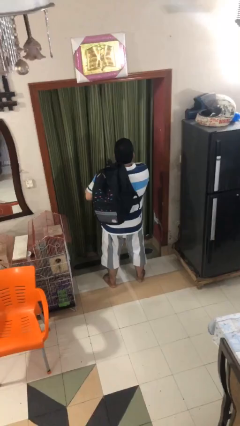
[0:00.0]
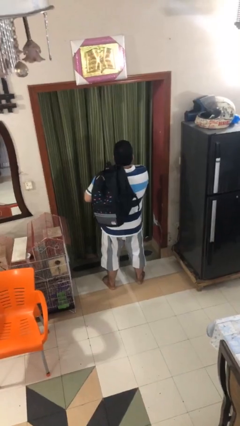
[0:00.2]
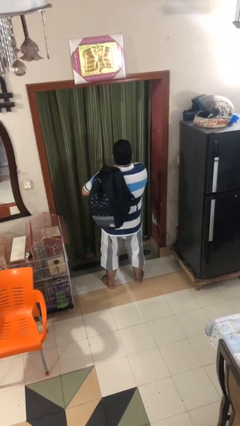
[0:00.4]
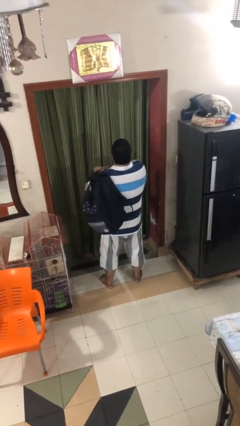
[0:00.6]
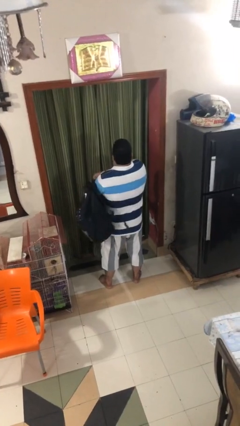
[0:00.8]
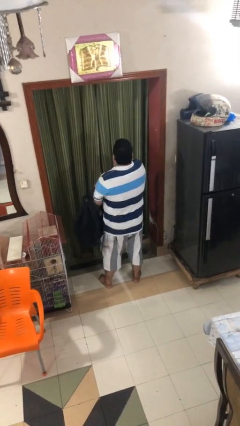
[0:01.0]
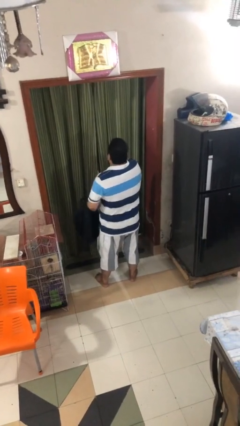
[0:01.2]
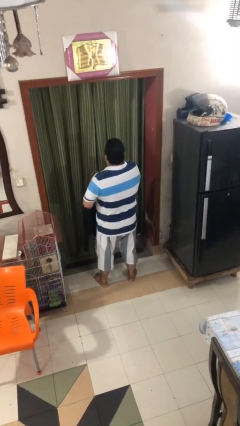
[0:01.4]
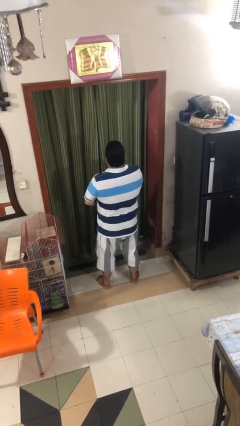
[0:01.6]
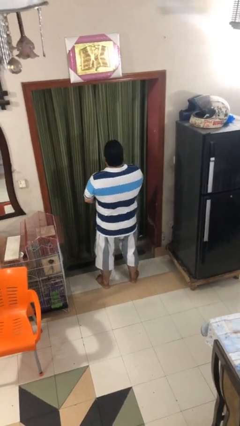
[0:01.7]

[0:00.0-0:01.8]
person takes off backpack

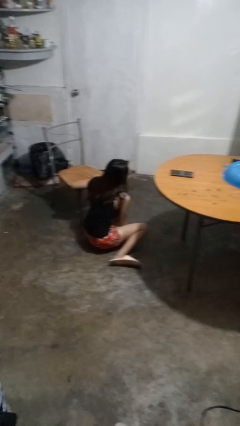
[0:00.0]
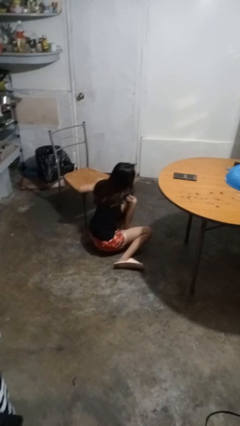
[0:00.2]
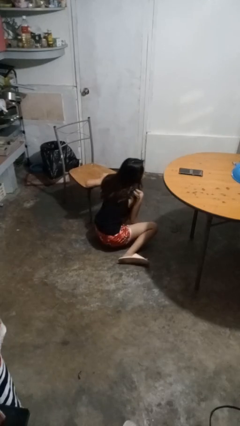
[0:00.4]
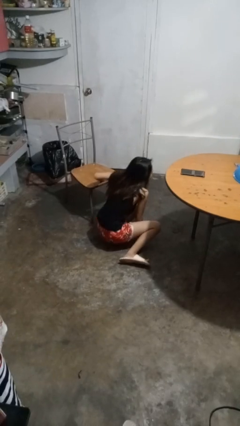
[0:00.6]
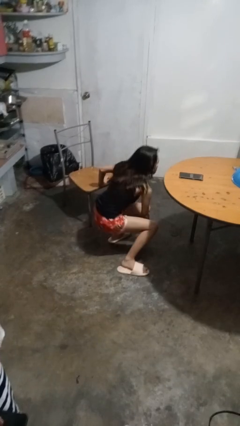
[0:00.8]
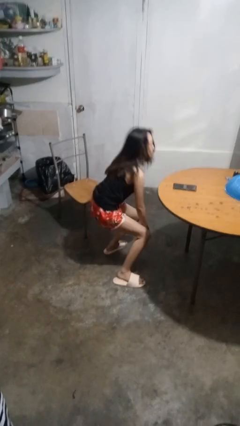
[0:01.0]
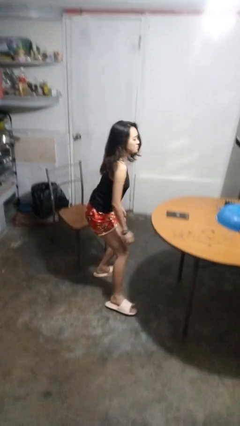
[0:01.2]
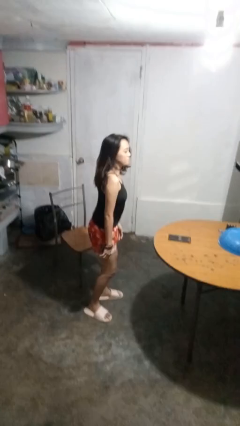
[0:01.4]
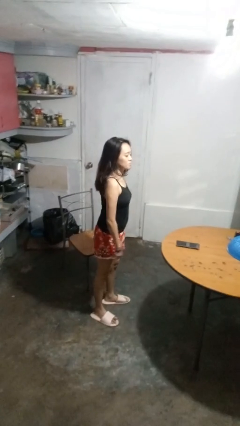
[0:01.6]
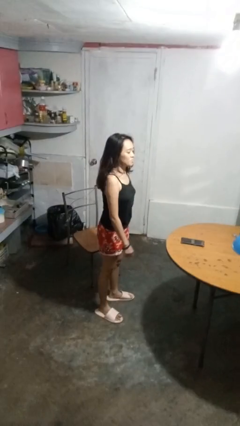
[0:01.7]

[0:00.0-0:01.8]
person stands up from floor

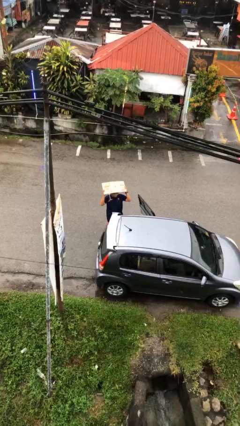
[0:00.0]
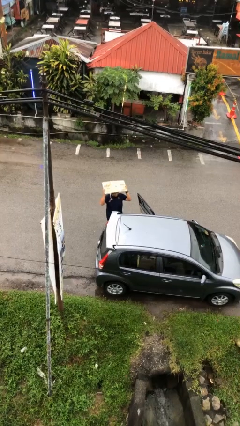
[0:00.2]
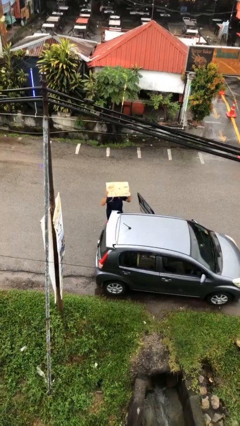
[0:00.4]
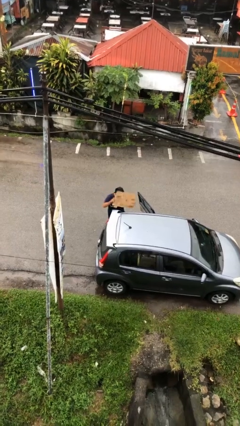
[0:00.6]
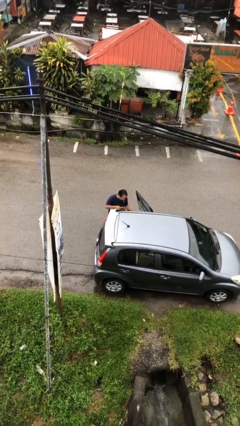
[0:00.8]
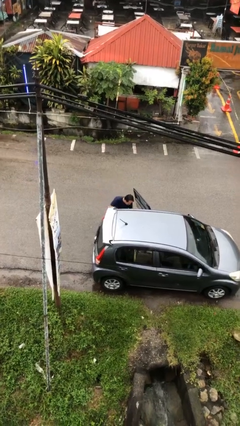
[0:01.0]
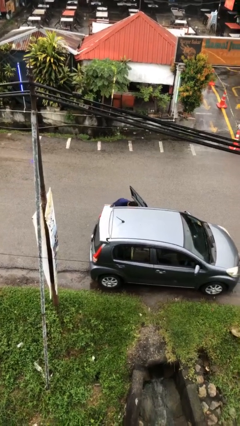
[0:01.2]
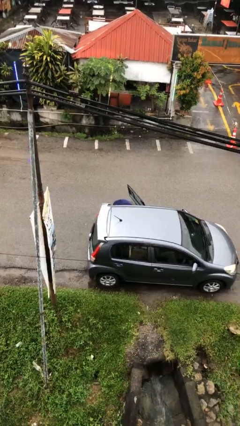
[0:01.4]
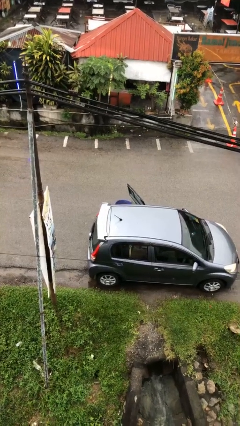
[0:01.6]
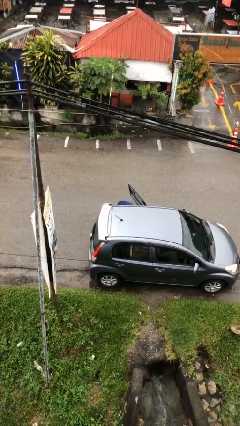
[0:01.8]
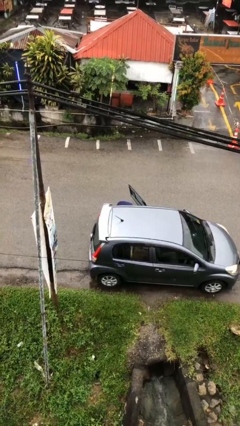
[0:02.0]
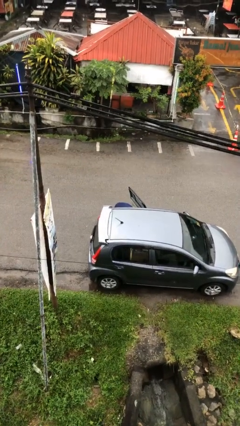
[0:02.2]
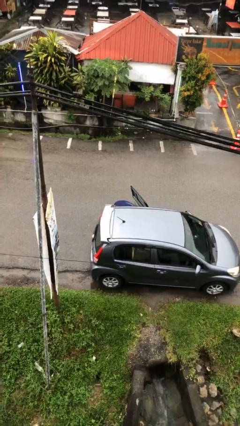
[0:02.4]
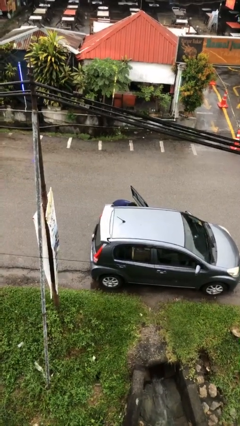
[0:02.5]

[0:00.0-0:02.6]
person loads car

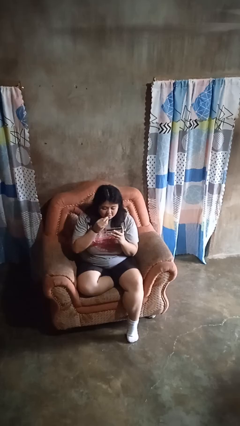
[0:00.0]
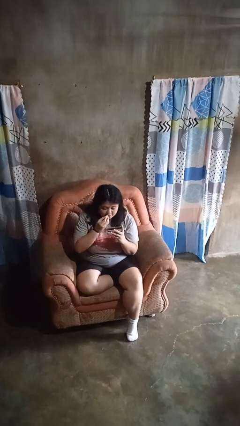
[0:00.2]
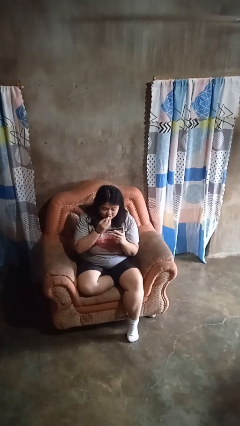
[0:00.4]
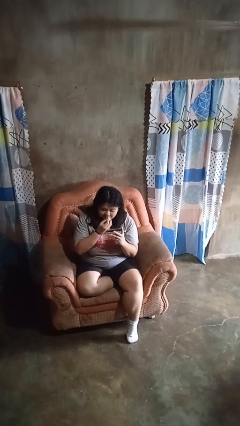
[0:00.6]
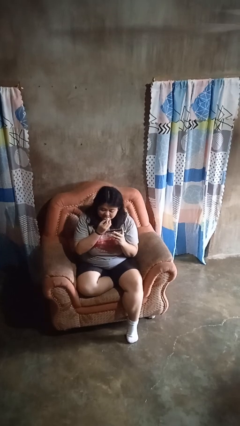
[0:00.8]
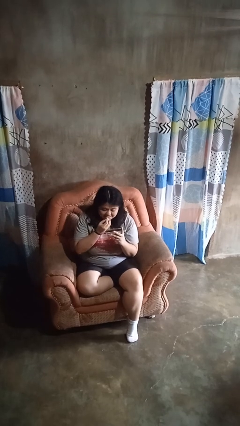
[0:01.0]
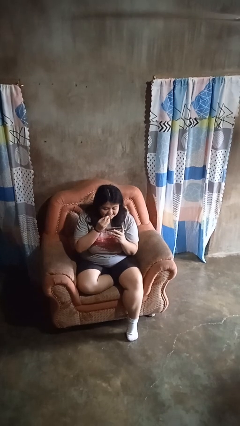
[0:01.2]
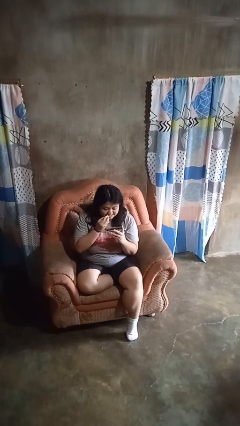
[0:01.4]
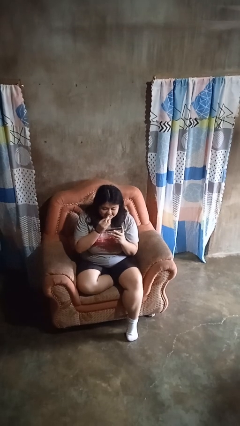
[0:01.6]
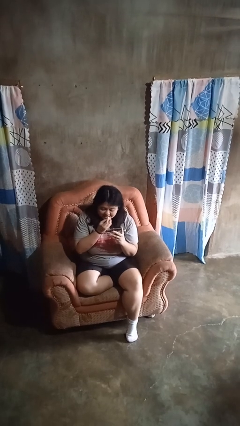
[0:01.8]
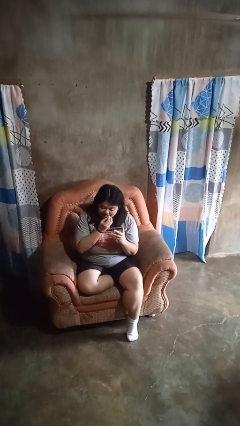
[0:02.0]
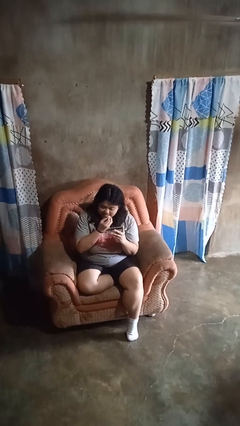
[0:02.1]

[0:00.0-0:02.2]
person applies lip makeup

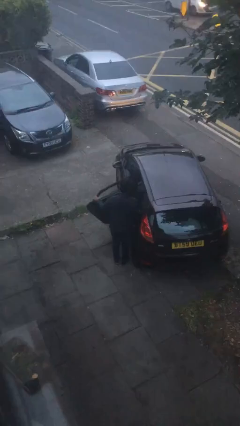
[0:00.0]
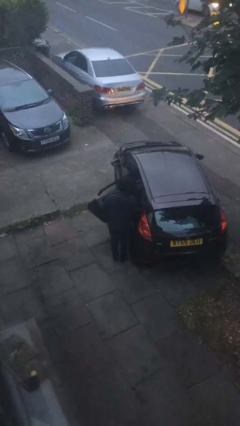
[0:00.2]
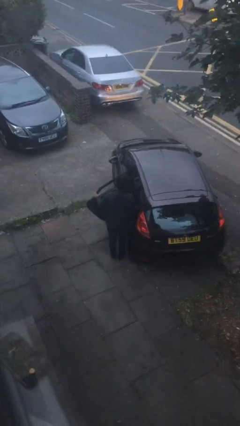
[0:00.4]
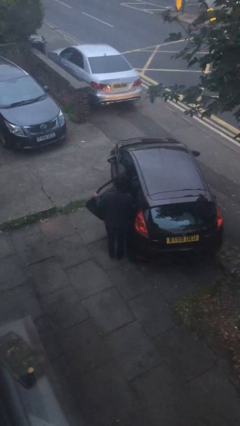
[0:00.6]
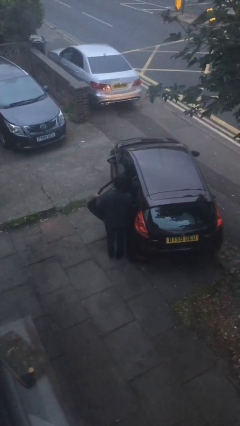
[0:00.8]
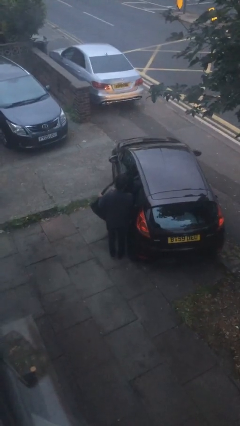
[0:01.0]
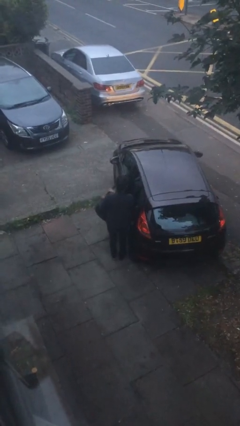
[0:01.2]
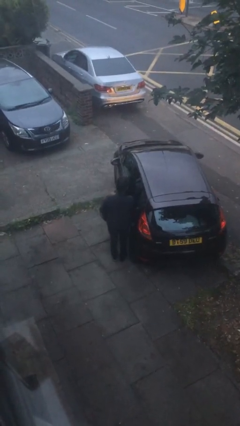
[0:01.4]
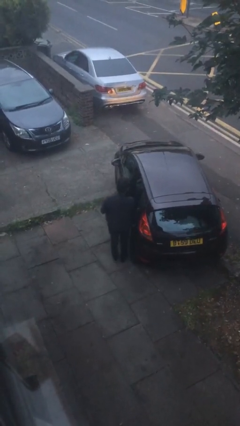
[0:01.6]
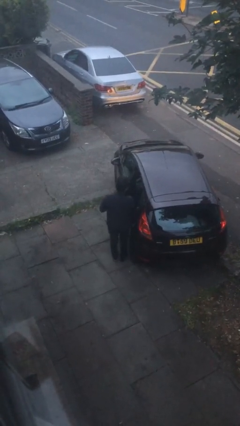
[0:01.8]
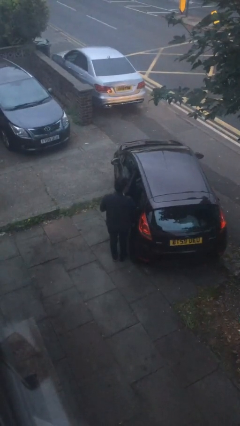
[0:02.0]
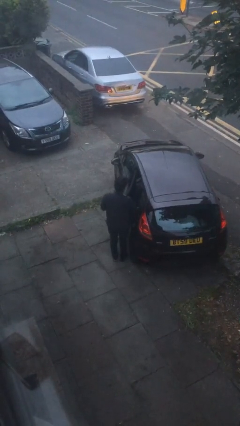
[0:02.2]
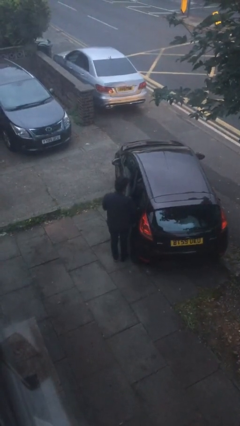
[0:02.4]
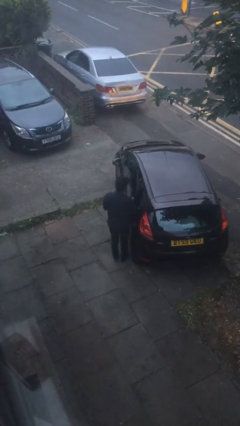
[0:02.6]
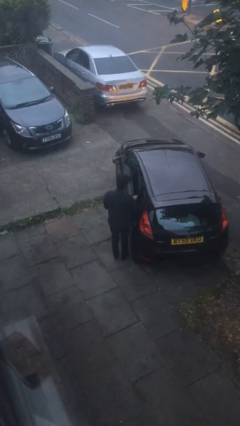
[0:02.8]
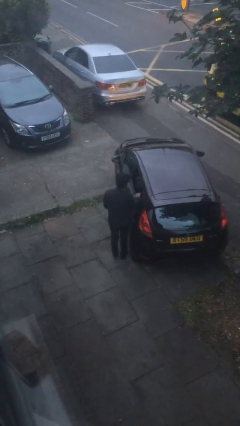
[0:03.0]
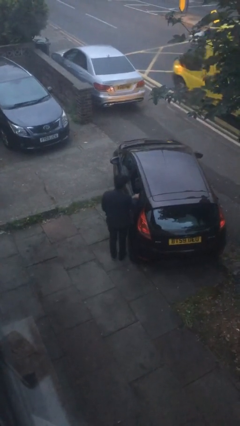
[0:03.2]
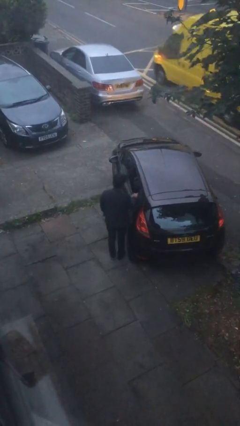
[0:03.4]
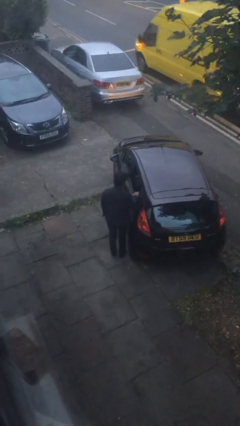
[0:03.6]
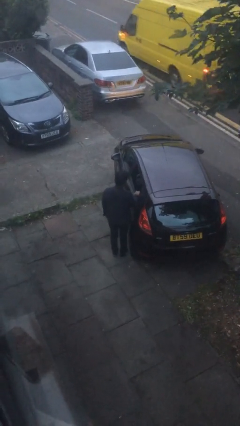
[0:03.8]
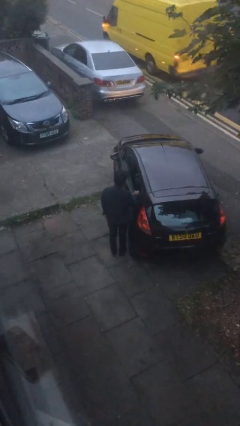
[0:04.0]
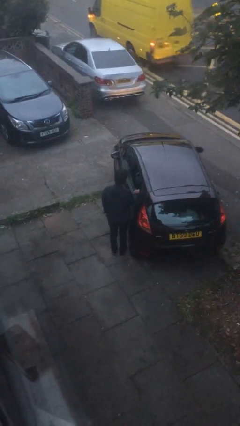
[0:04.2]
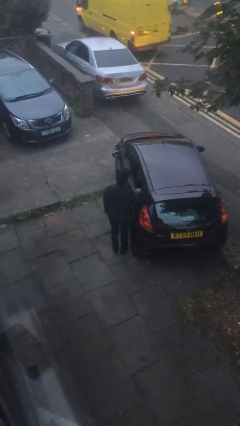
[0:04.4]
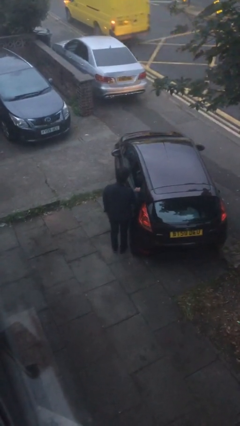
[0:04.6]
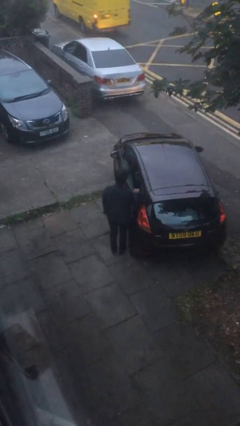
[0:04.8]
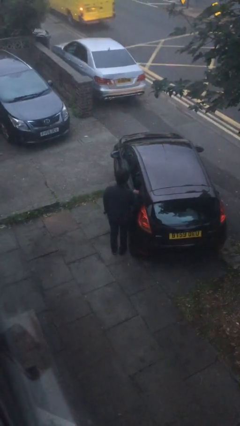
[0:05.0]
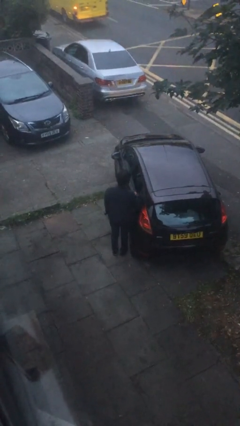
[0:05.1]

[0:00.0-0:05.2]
person closes car door

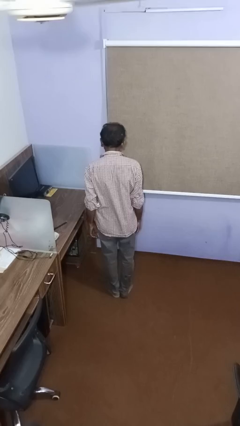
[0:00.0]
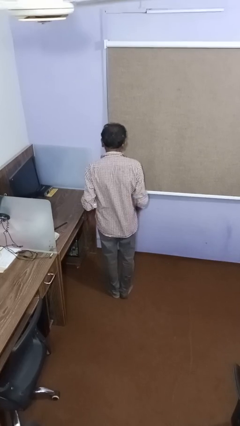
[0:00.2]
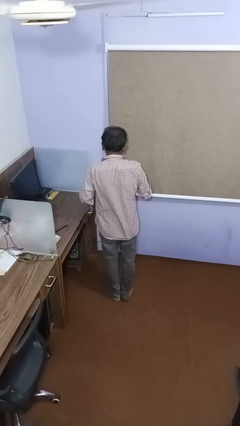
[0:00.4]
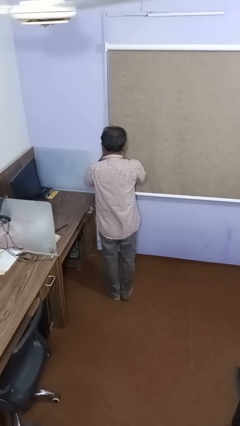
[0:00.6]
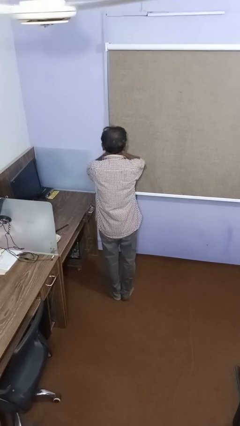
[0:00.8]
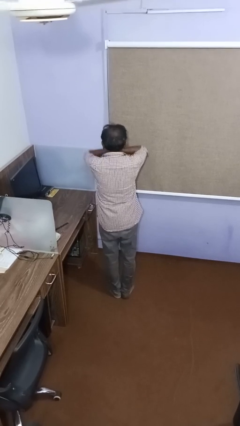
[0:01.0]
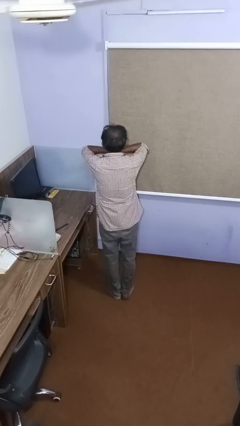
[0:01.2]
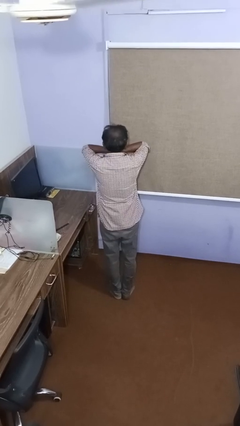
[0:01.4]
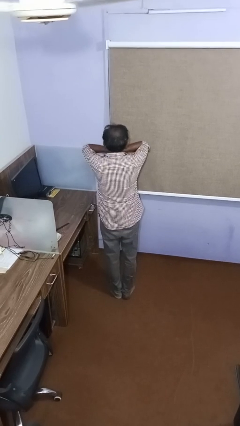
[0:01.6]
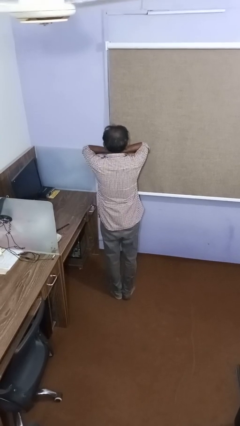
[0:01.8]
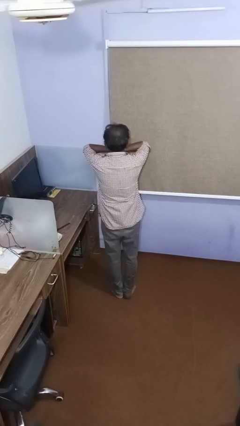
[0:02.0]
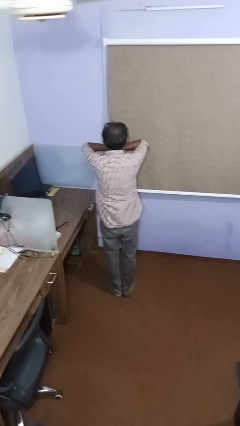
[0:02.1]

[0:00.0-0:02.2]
person covers face with hands

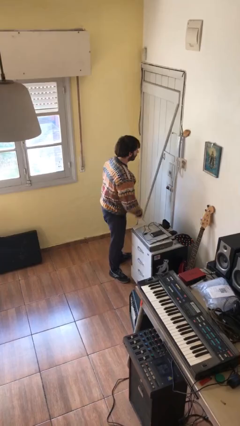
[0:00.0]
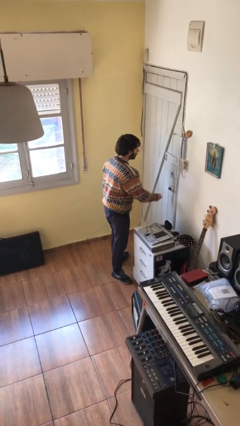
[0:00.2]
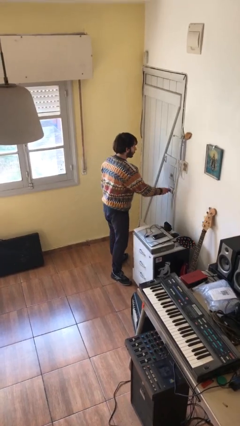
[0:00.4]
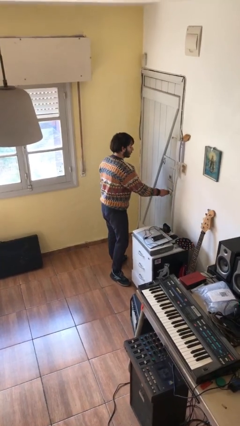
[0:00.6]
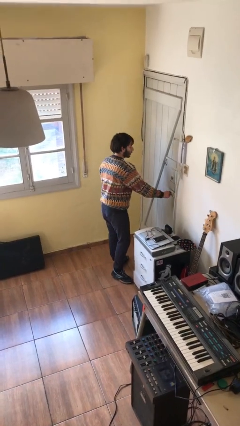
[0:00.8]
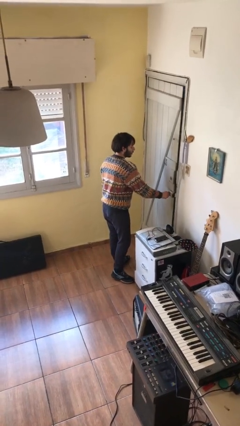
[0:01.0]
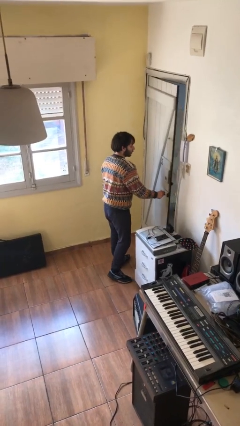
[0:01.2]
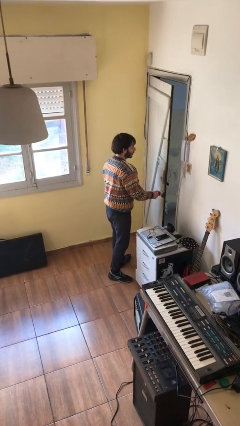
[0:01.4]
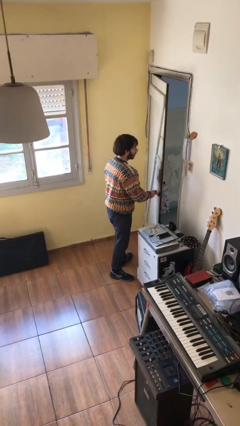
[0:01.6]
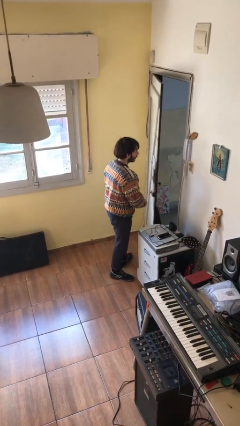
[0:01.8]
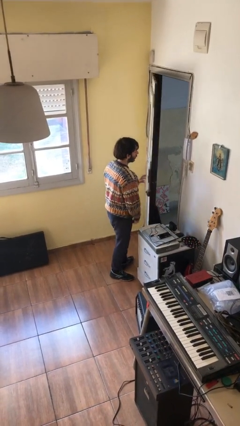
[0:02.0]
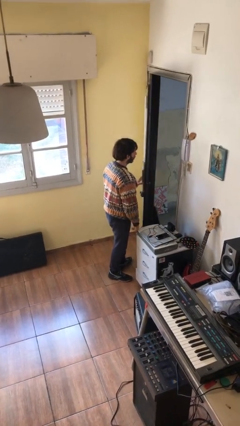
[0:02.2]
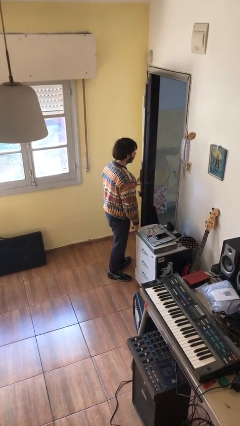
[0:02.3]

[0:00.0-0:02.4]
person opens facility door
